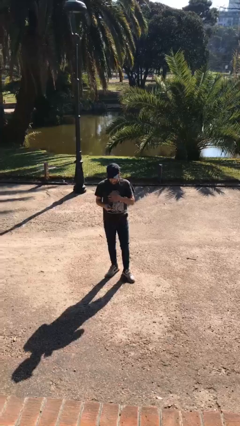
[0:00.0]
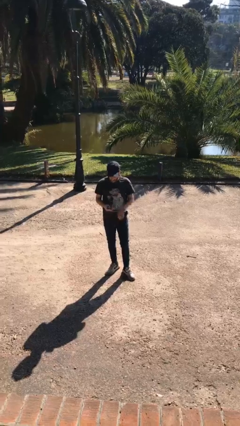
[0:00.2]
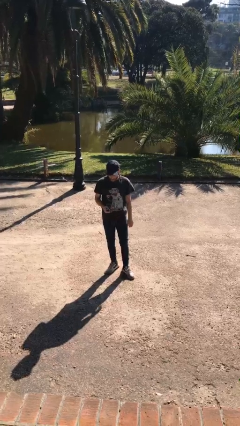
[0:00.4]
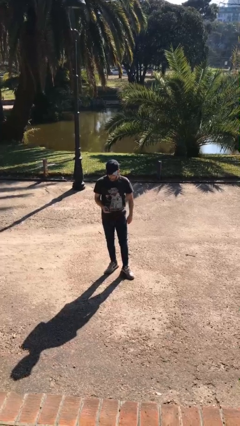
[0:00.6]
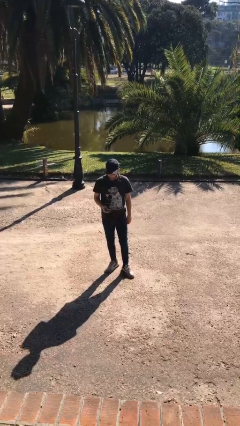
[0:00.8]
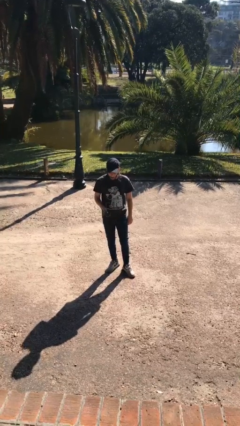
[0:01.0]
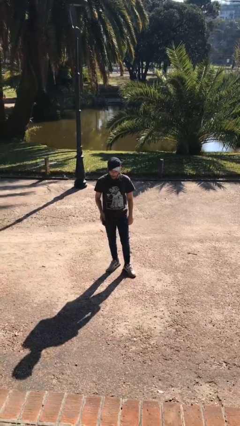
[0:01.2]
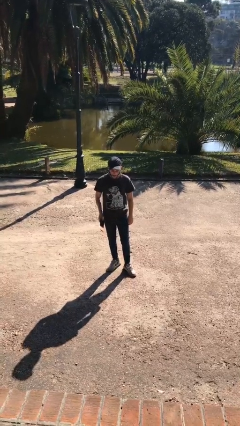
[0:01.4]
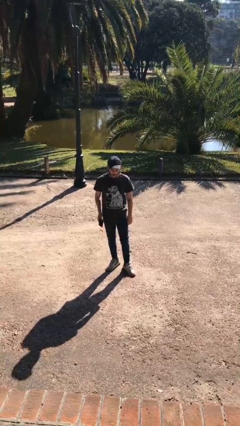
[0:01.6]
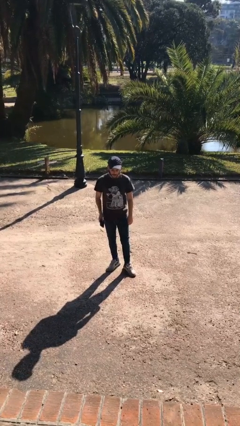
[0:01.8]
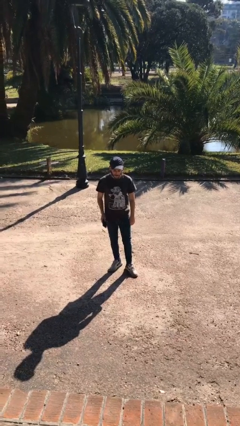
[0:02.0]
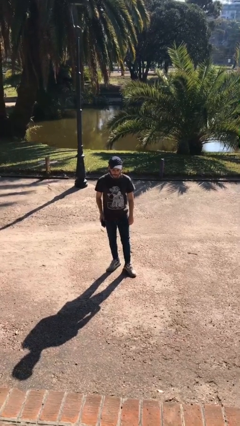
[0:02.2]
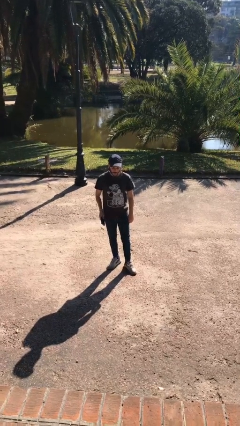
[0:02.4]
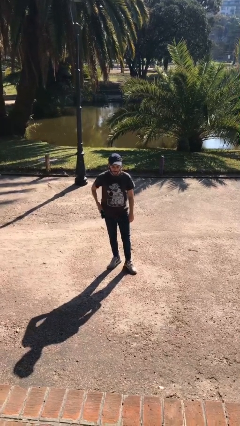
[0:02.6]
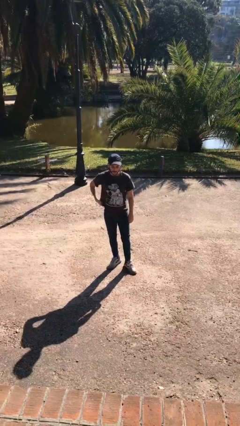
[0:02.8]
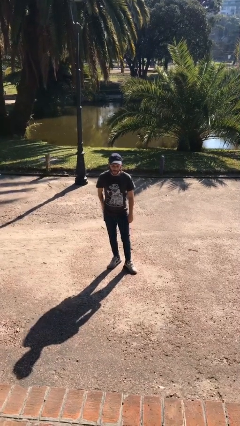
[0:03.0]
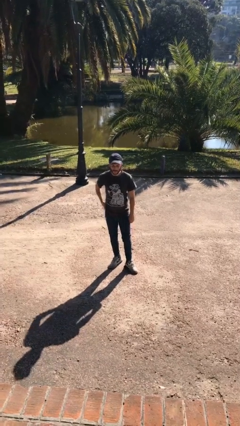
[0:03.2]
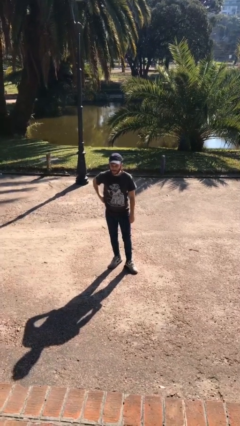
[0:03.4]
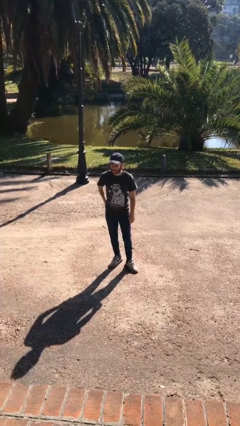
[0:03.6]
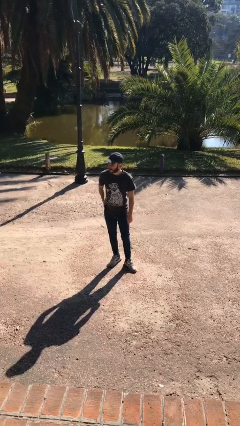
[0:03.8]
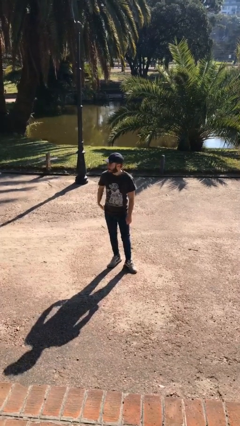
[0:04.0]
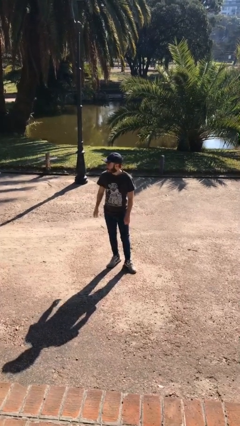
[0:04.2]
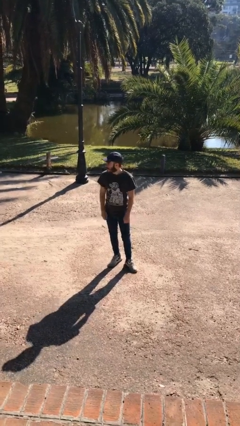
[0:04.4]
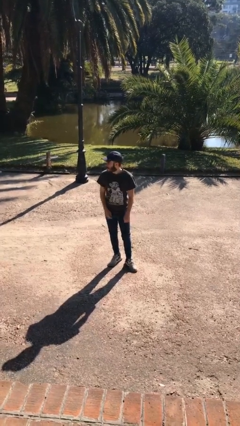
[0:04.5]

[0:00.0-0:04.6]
person puts phone into pocket

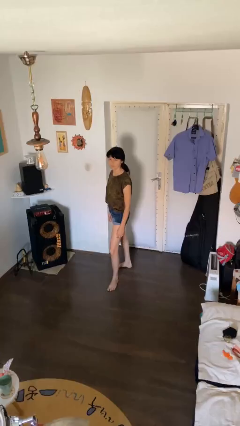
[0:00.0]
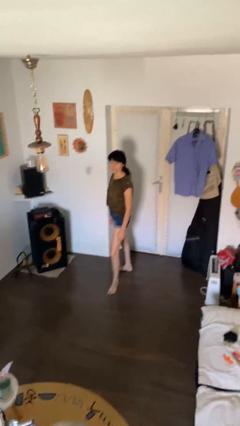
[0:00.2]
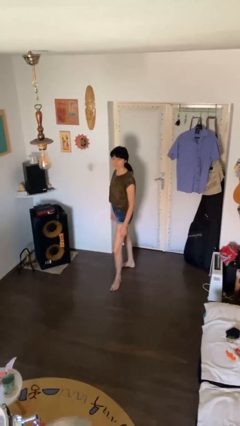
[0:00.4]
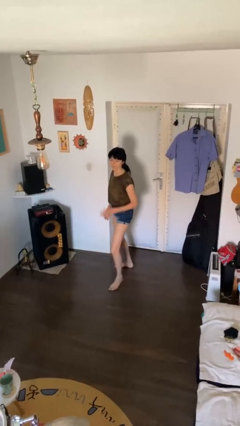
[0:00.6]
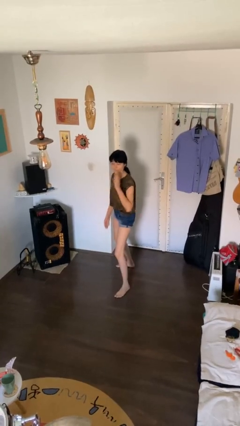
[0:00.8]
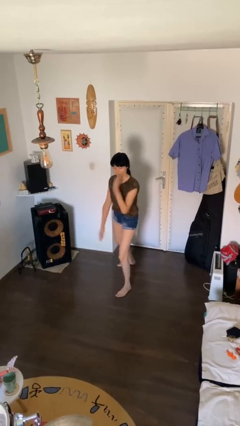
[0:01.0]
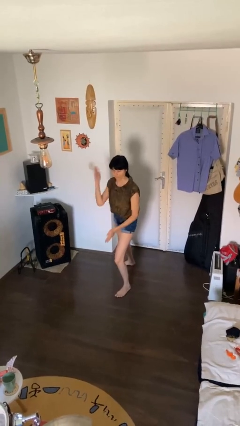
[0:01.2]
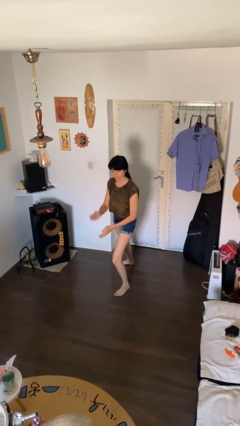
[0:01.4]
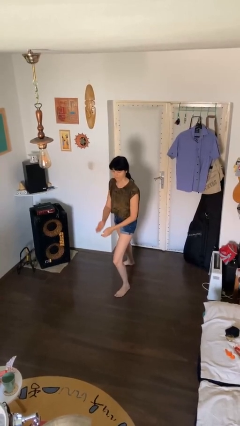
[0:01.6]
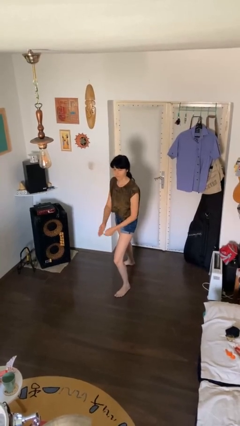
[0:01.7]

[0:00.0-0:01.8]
person karate chop

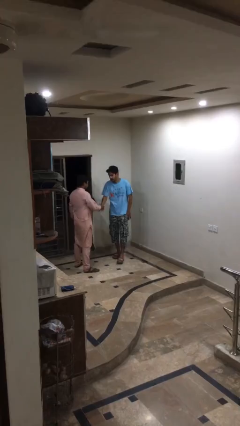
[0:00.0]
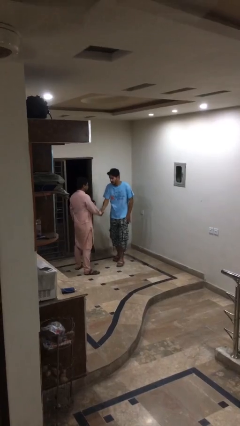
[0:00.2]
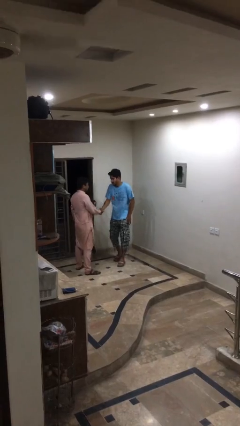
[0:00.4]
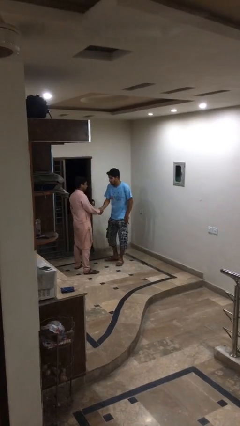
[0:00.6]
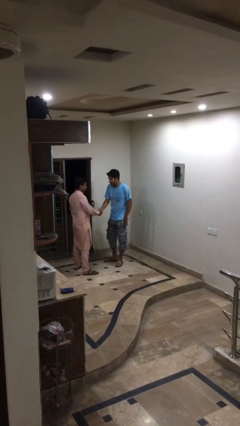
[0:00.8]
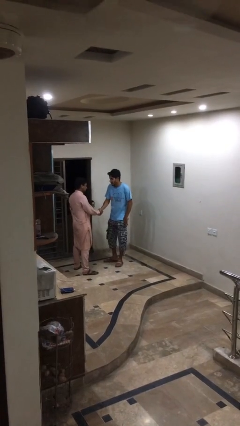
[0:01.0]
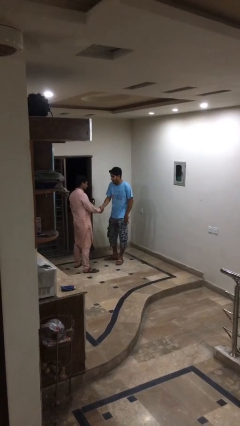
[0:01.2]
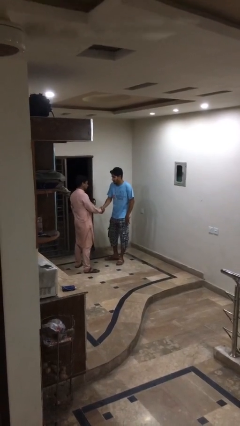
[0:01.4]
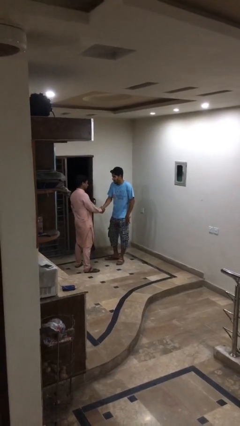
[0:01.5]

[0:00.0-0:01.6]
person shakes hand

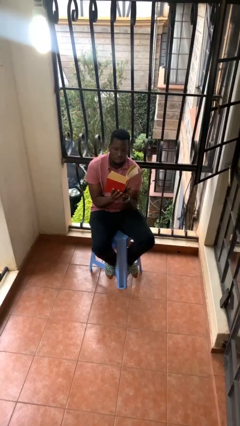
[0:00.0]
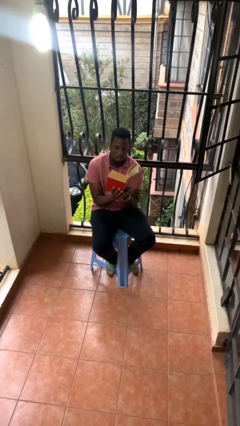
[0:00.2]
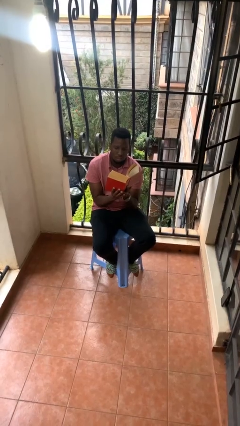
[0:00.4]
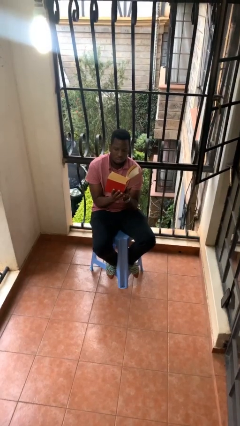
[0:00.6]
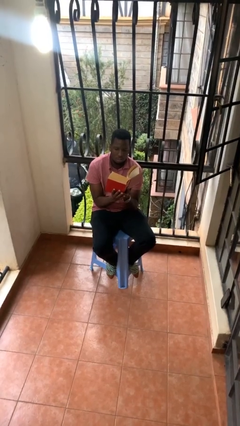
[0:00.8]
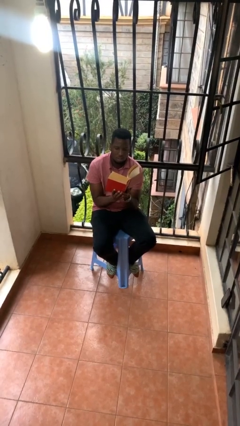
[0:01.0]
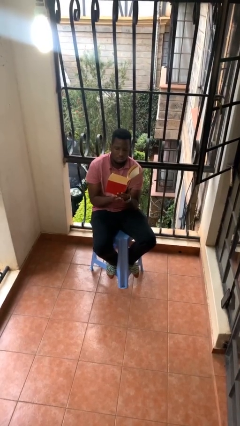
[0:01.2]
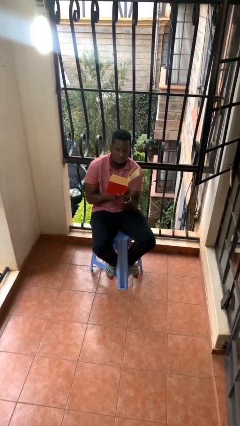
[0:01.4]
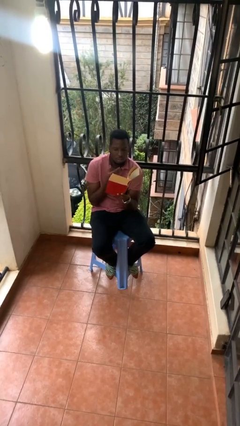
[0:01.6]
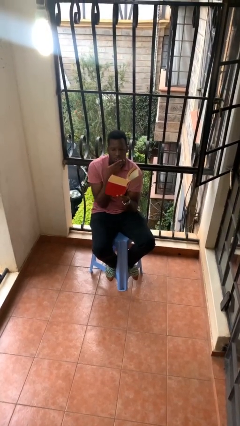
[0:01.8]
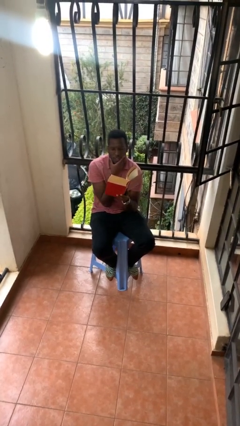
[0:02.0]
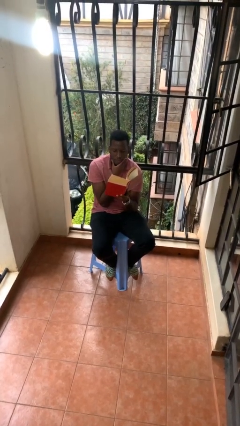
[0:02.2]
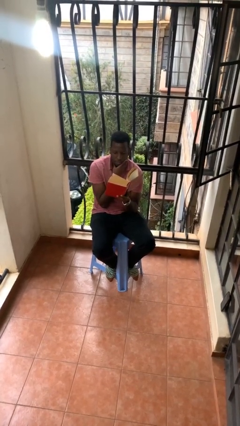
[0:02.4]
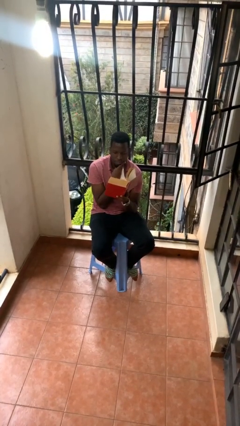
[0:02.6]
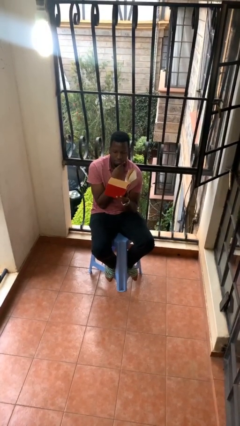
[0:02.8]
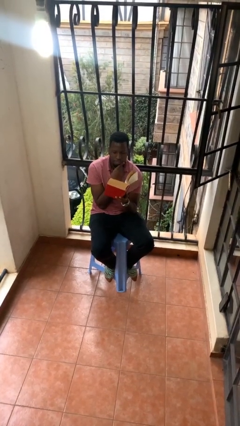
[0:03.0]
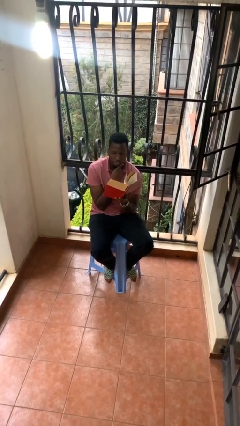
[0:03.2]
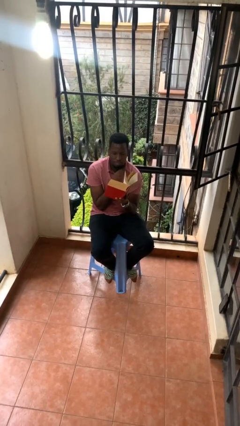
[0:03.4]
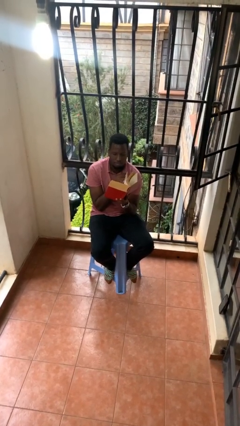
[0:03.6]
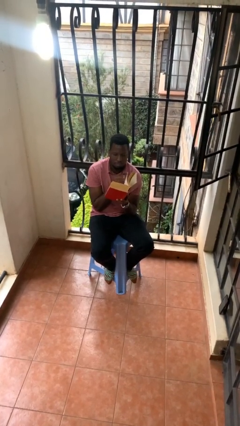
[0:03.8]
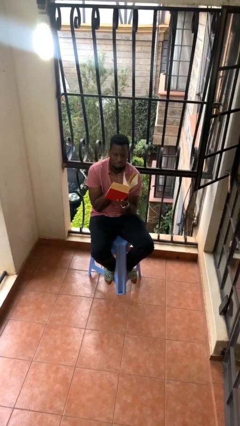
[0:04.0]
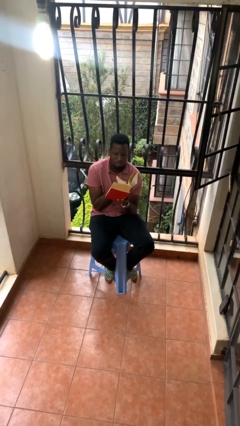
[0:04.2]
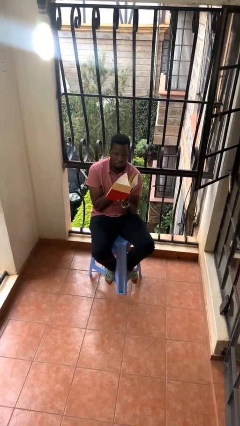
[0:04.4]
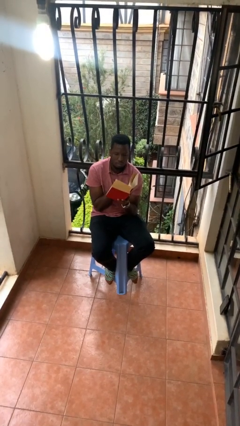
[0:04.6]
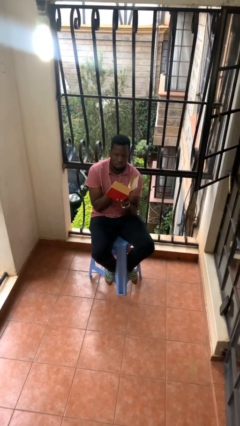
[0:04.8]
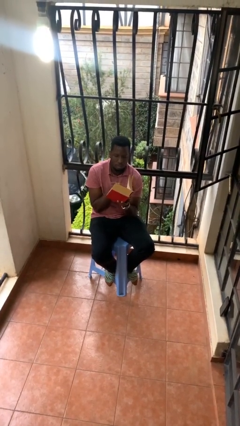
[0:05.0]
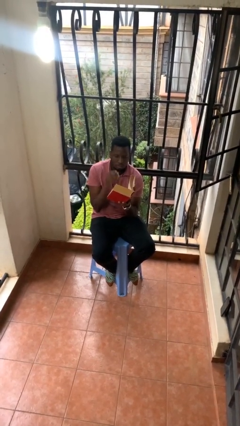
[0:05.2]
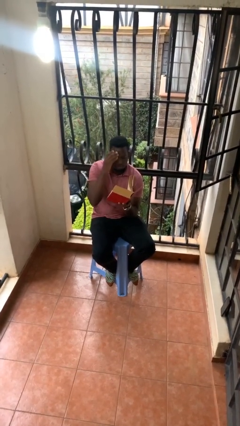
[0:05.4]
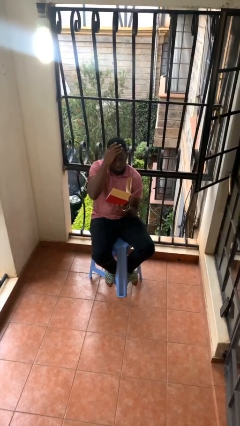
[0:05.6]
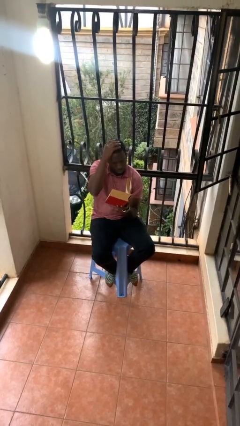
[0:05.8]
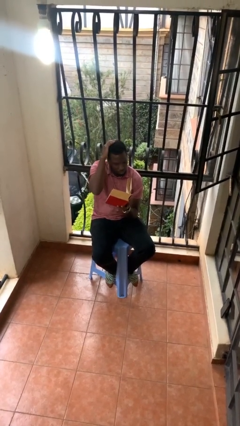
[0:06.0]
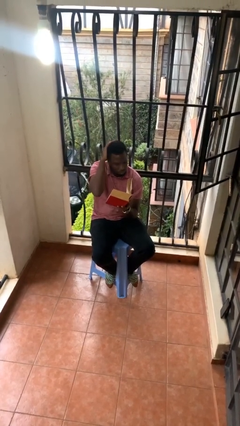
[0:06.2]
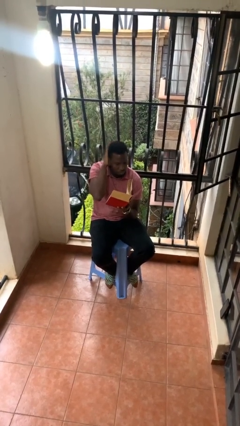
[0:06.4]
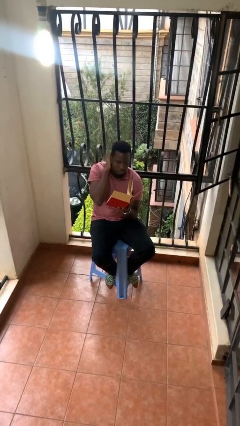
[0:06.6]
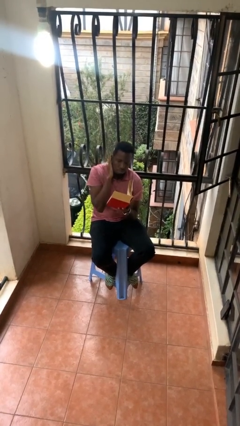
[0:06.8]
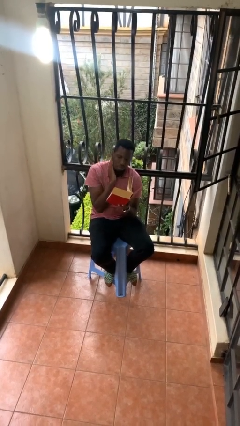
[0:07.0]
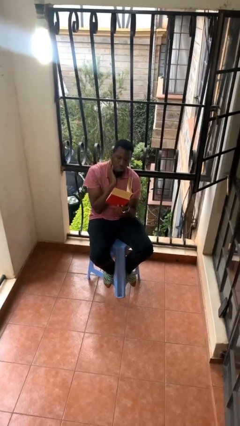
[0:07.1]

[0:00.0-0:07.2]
person reads document

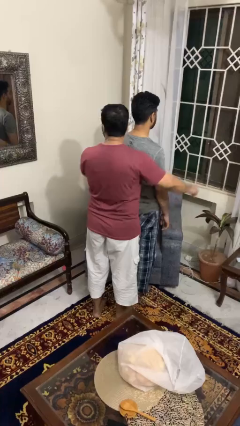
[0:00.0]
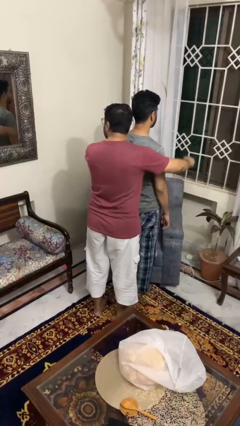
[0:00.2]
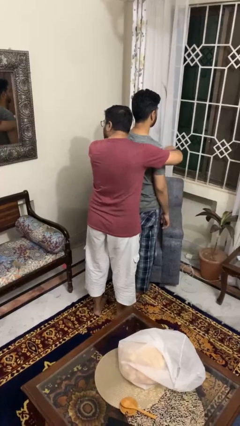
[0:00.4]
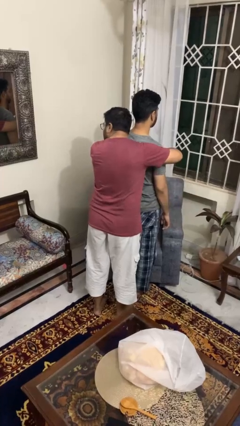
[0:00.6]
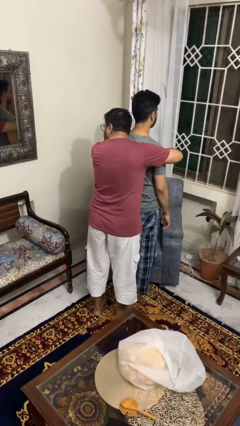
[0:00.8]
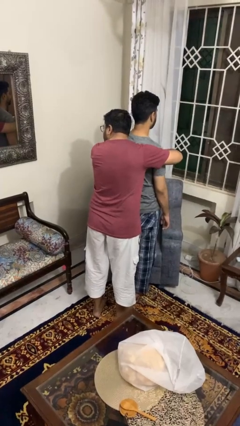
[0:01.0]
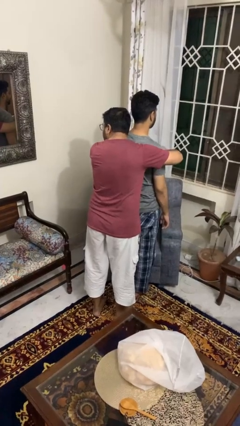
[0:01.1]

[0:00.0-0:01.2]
person hugs person from behind

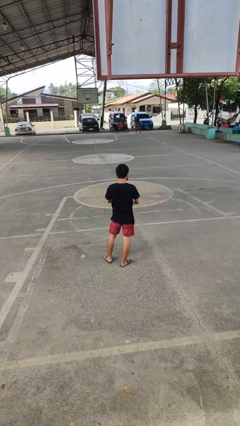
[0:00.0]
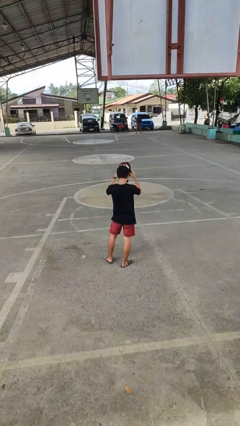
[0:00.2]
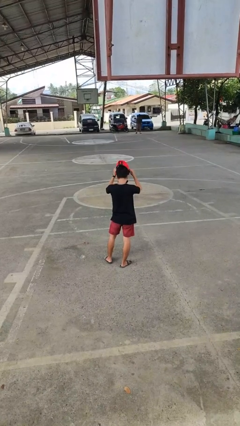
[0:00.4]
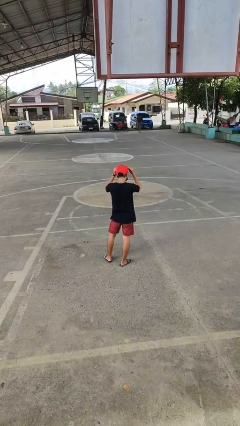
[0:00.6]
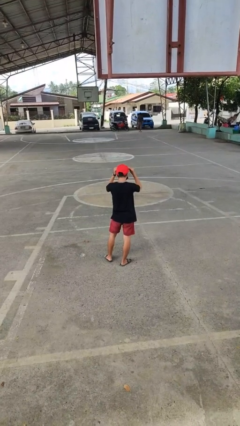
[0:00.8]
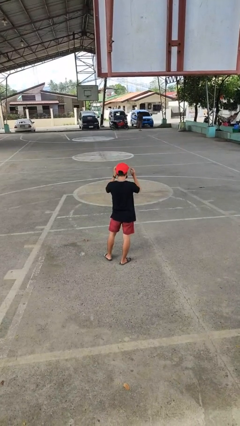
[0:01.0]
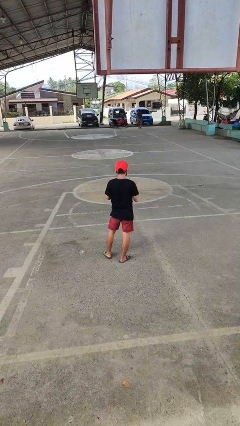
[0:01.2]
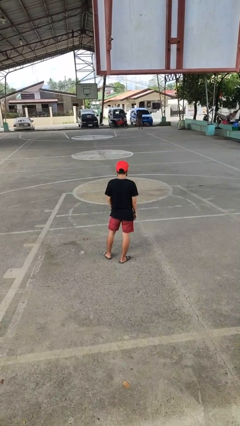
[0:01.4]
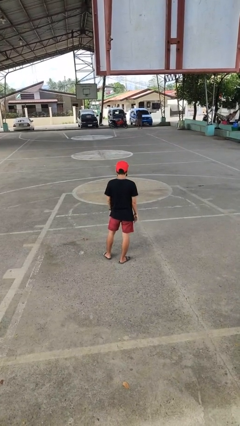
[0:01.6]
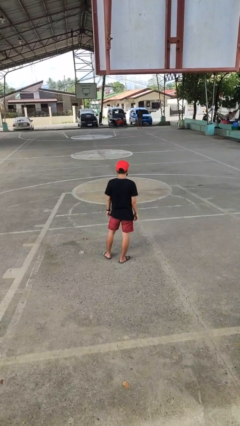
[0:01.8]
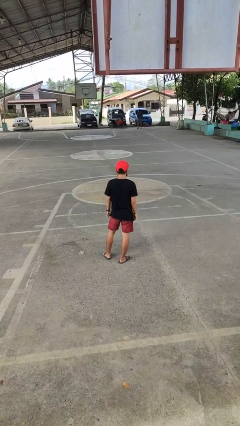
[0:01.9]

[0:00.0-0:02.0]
person puts on hat
